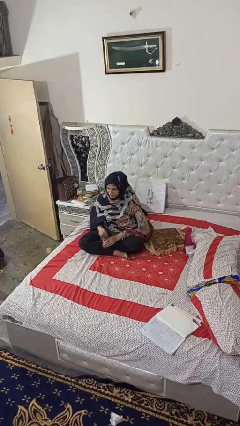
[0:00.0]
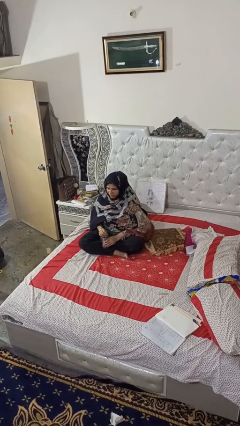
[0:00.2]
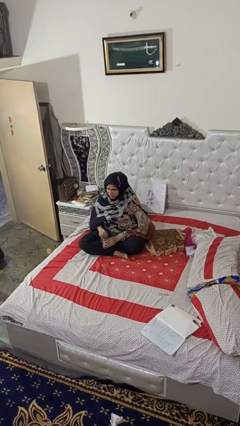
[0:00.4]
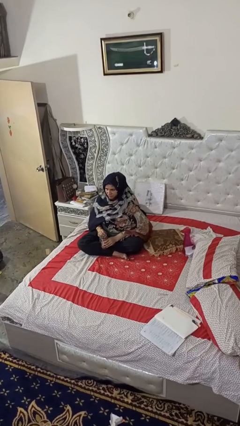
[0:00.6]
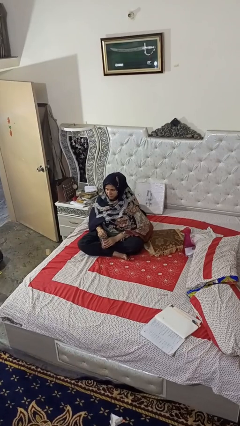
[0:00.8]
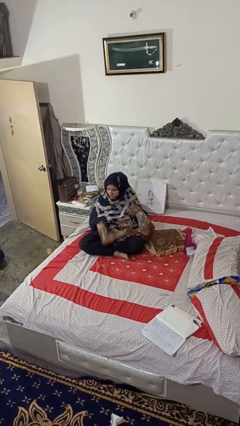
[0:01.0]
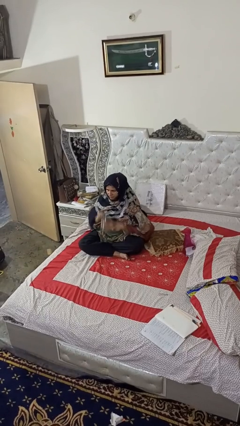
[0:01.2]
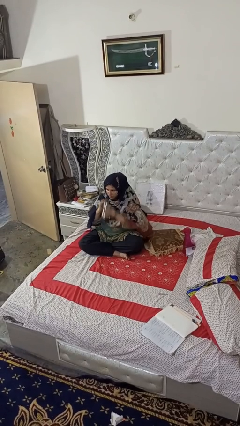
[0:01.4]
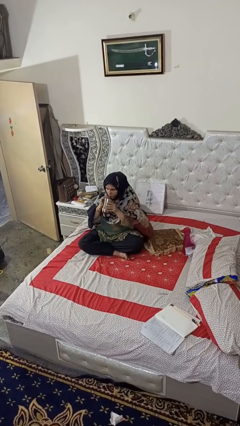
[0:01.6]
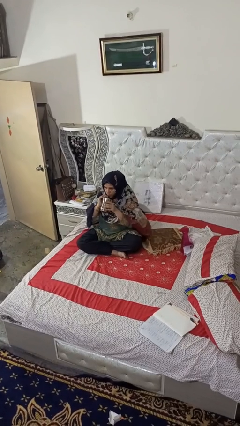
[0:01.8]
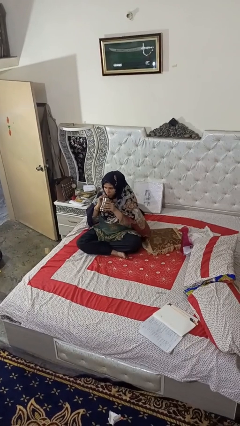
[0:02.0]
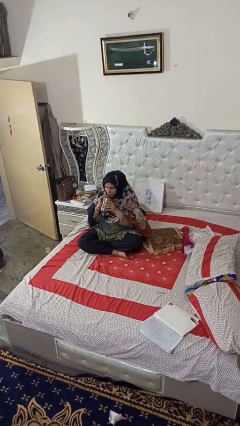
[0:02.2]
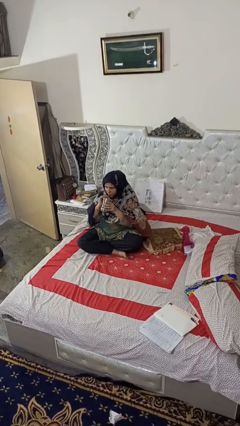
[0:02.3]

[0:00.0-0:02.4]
person drinks from straw

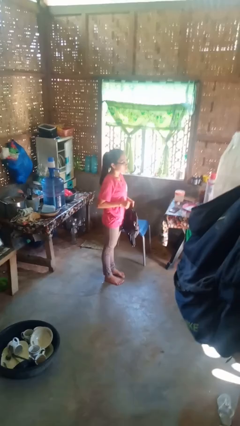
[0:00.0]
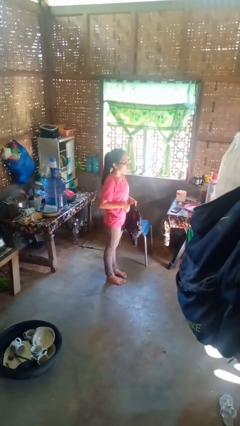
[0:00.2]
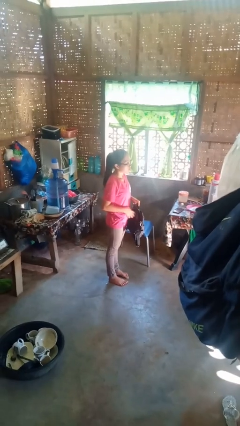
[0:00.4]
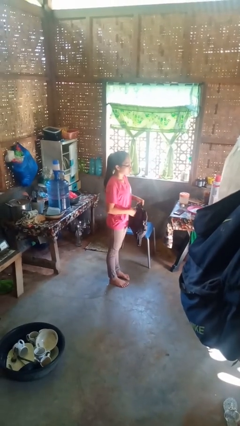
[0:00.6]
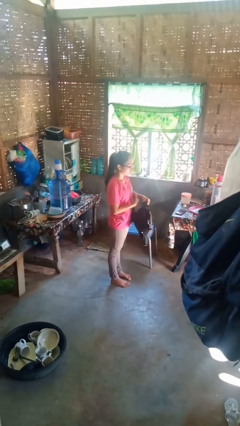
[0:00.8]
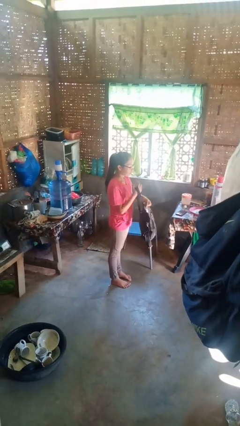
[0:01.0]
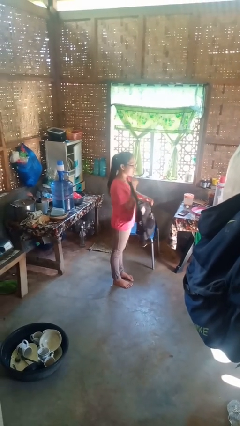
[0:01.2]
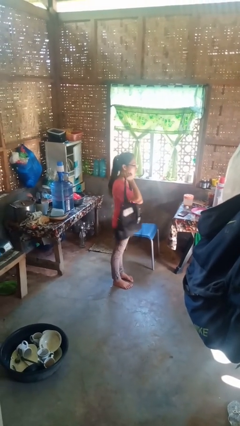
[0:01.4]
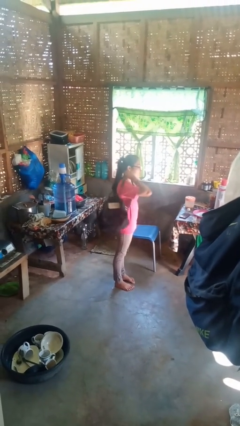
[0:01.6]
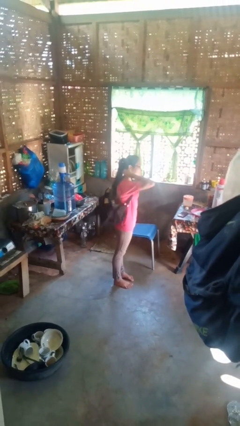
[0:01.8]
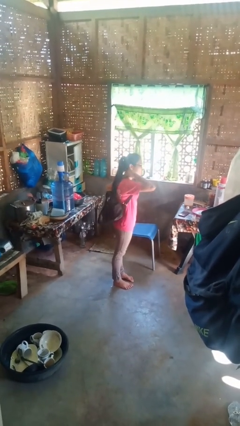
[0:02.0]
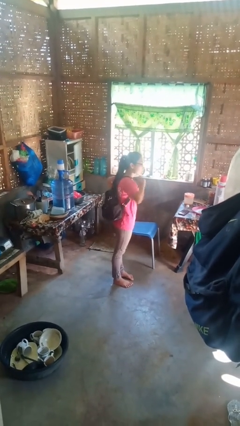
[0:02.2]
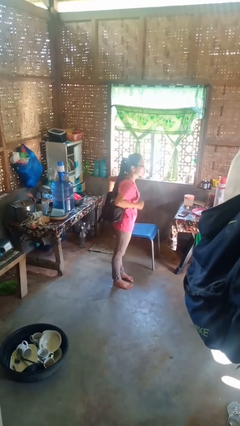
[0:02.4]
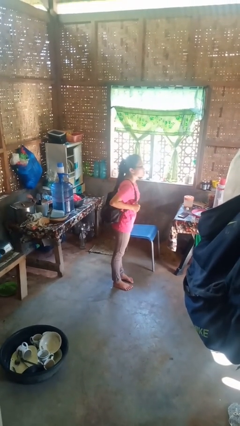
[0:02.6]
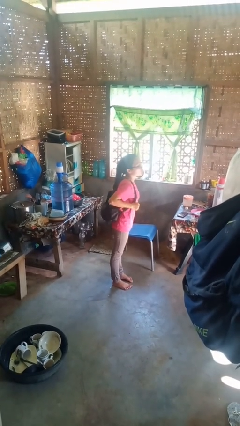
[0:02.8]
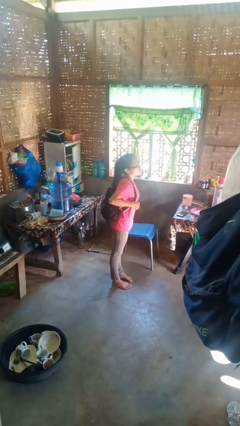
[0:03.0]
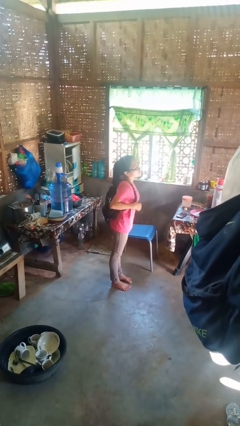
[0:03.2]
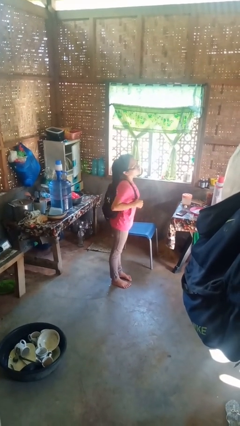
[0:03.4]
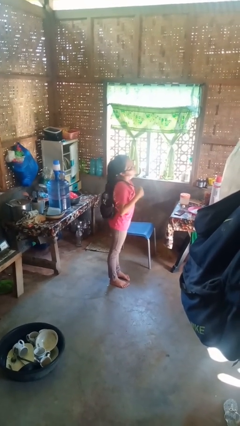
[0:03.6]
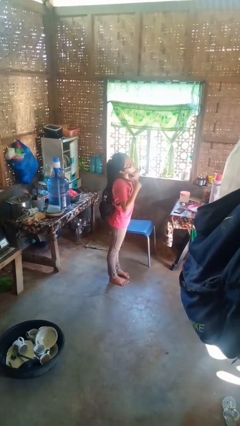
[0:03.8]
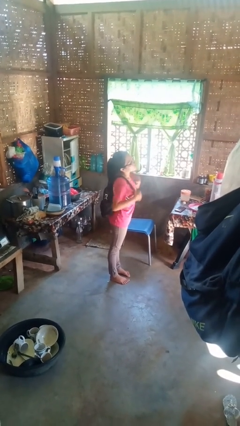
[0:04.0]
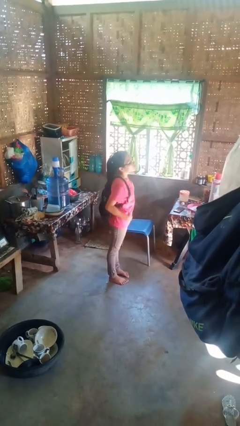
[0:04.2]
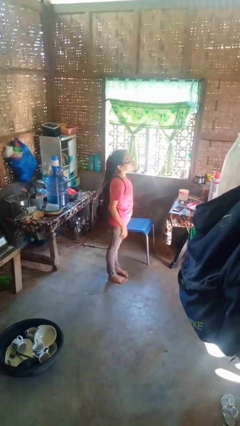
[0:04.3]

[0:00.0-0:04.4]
person puts on backpack

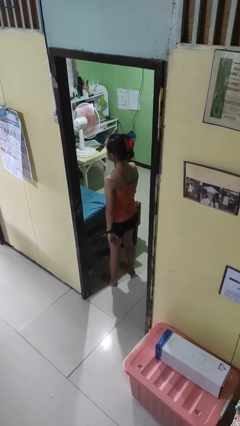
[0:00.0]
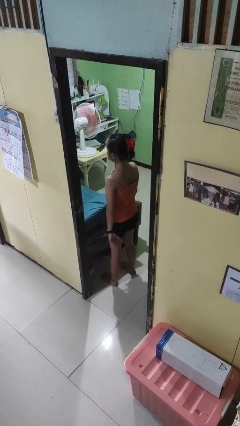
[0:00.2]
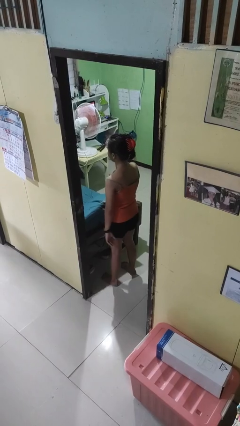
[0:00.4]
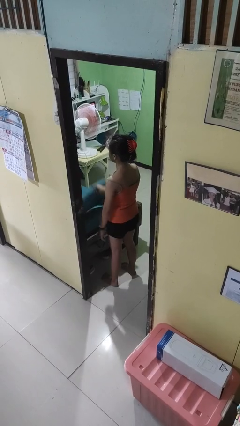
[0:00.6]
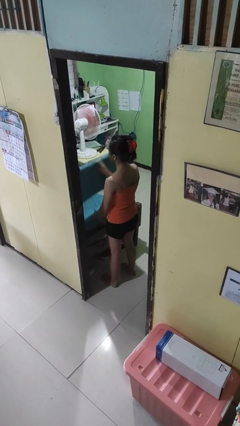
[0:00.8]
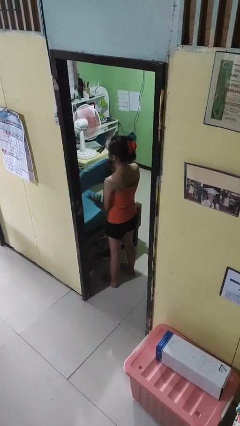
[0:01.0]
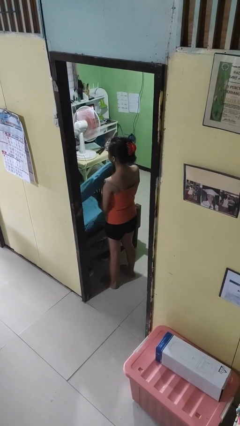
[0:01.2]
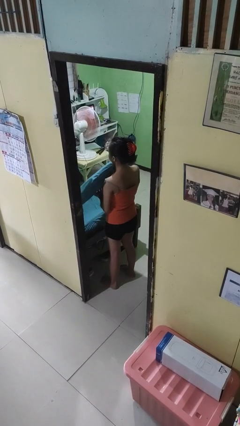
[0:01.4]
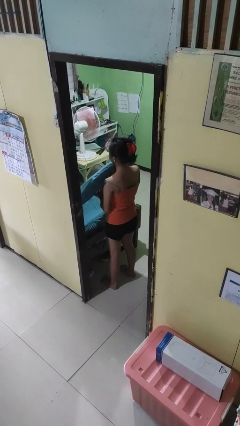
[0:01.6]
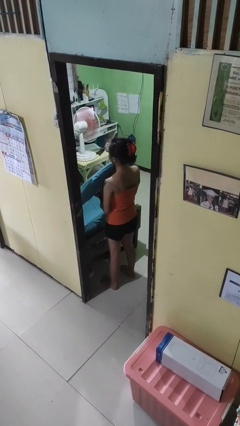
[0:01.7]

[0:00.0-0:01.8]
person picks up object from bed

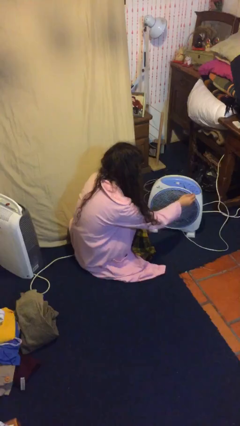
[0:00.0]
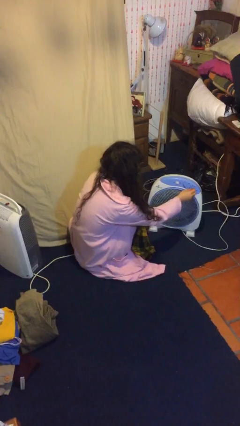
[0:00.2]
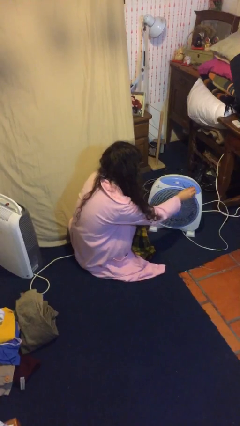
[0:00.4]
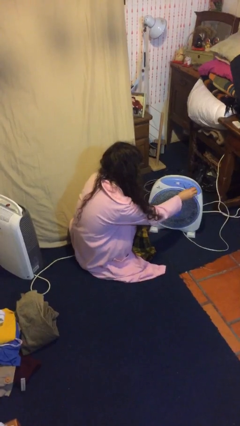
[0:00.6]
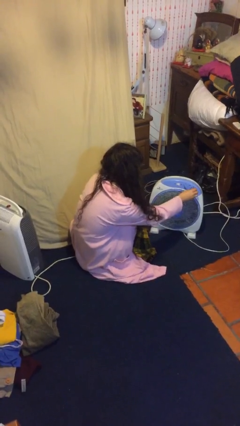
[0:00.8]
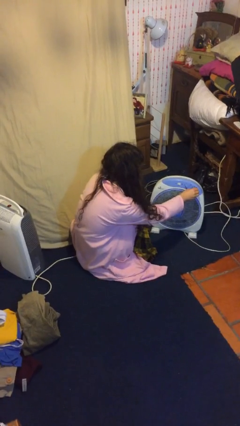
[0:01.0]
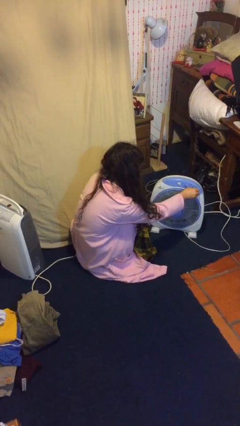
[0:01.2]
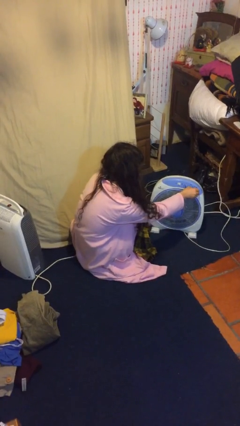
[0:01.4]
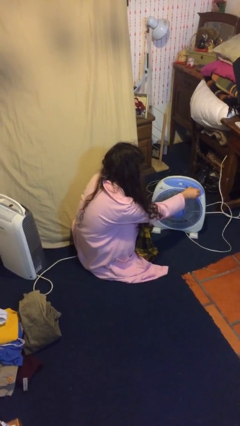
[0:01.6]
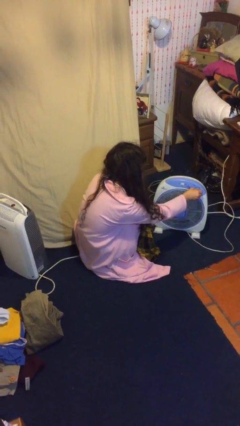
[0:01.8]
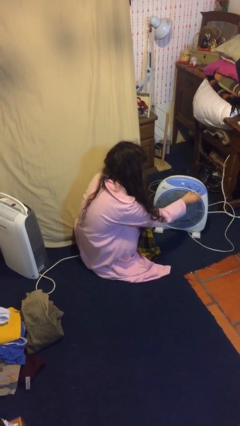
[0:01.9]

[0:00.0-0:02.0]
person turns off fan

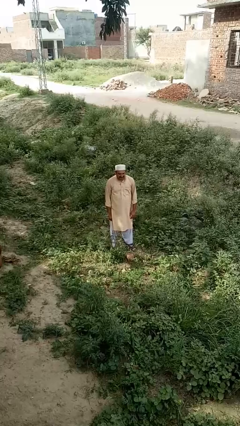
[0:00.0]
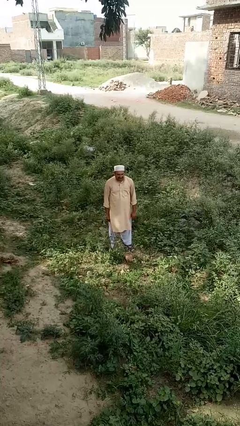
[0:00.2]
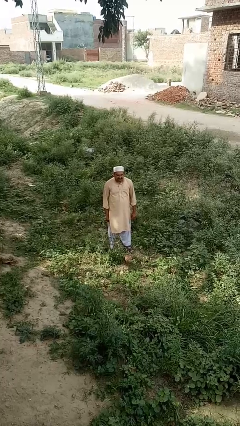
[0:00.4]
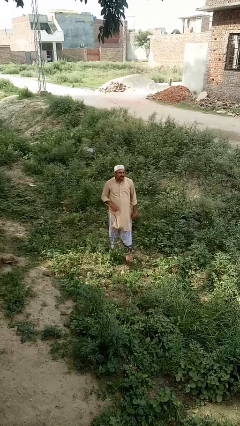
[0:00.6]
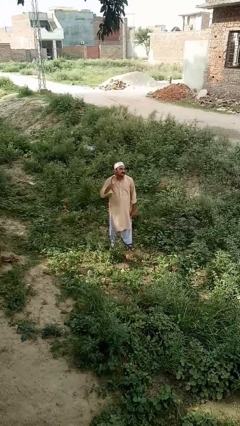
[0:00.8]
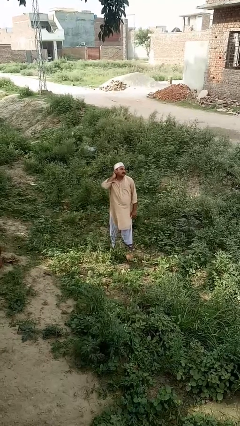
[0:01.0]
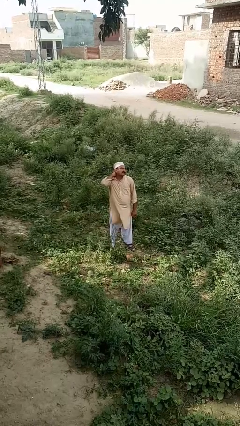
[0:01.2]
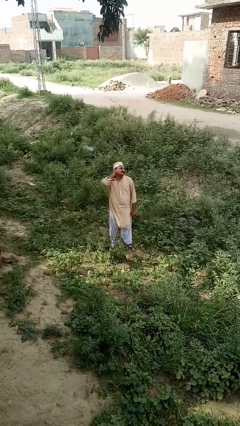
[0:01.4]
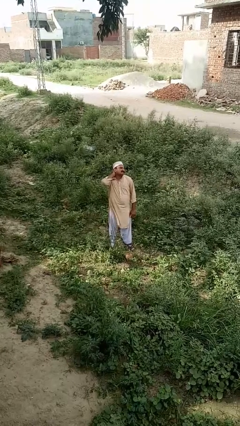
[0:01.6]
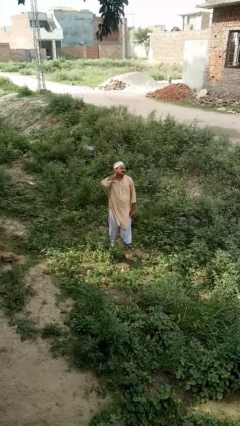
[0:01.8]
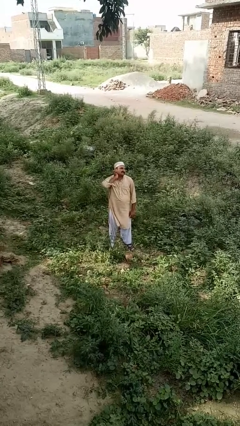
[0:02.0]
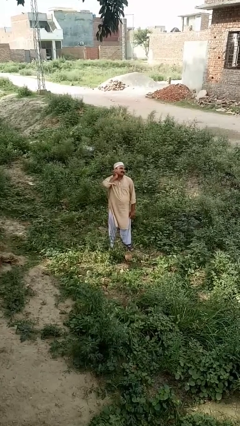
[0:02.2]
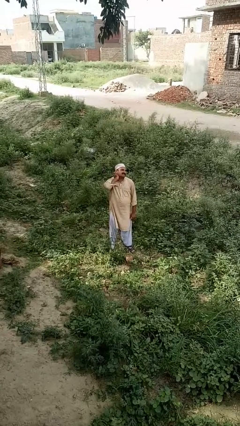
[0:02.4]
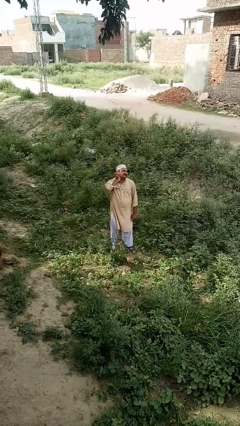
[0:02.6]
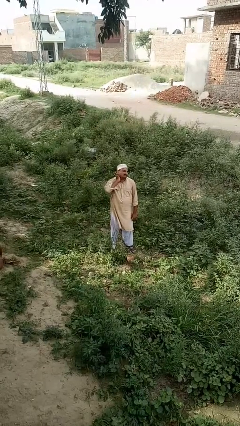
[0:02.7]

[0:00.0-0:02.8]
person rubs neck

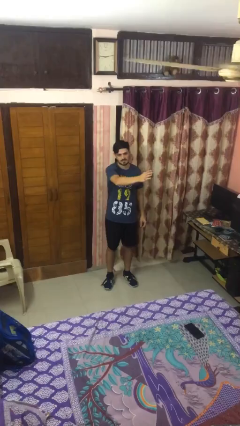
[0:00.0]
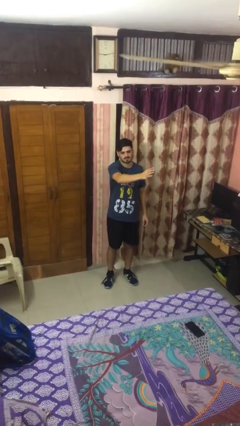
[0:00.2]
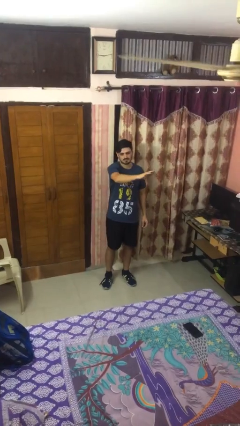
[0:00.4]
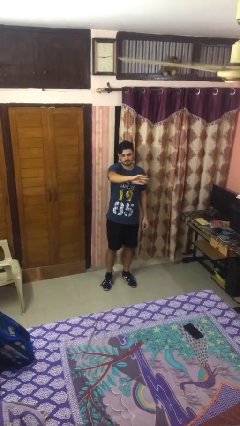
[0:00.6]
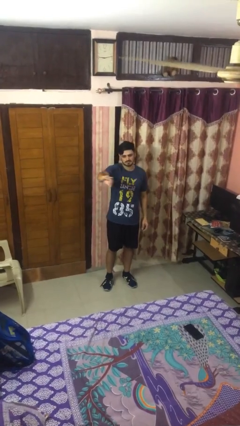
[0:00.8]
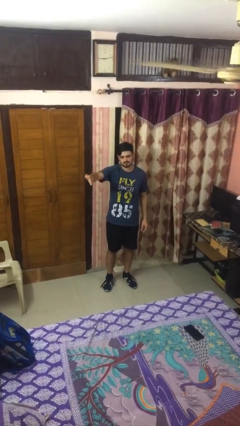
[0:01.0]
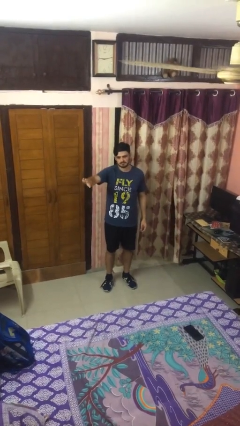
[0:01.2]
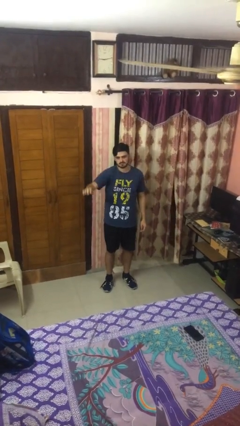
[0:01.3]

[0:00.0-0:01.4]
person gestures swipe right

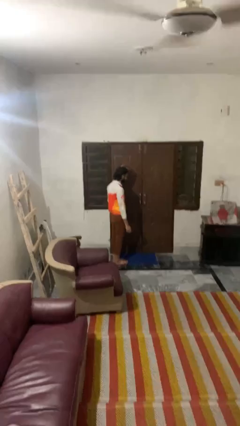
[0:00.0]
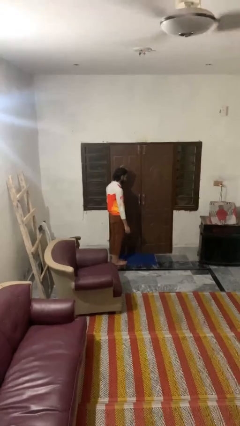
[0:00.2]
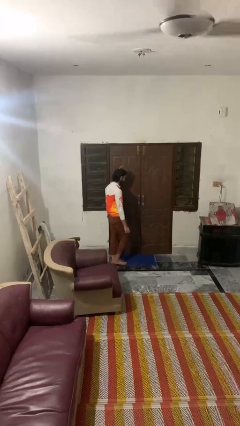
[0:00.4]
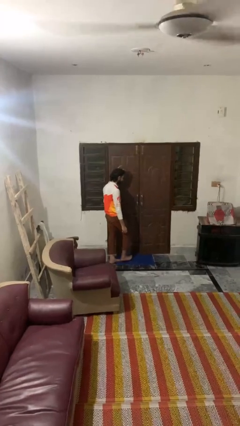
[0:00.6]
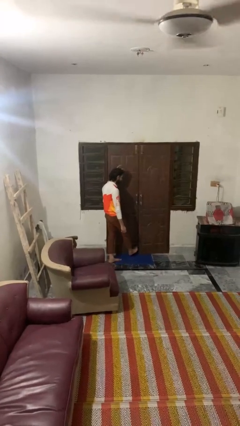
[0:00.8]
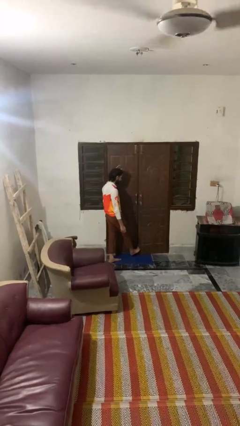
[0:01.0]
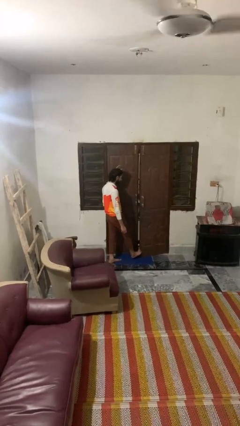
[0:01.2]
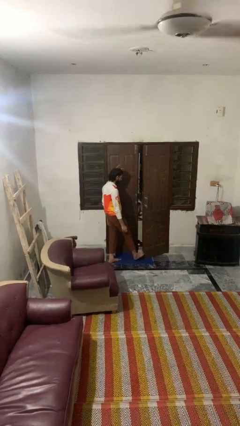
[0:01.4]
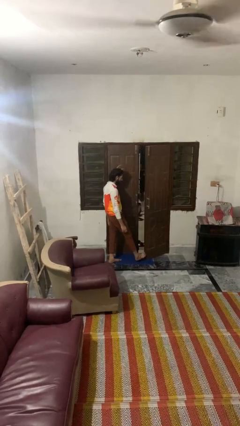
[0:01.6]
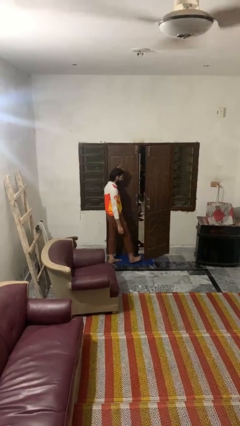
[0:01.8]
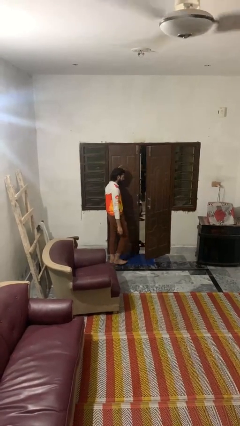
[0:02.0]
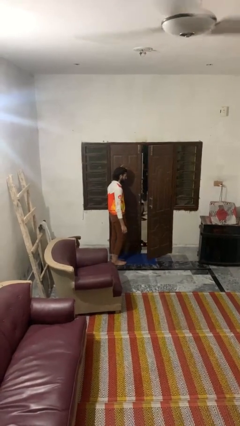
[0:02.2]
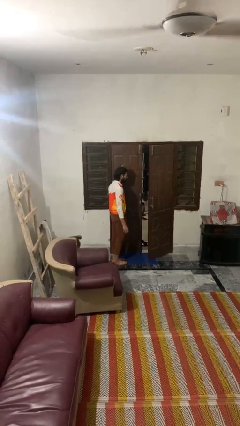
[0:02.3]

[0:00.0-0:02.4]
person opens facility door
